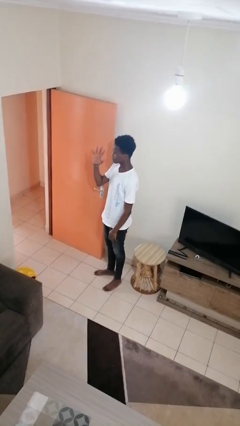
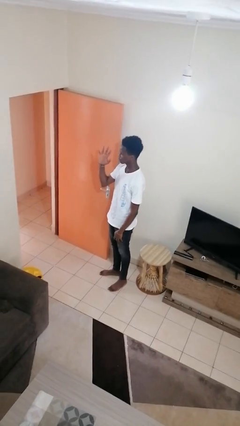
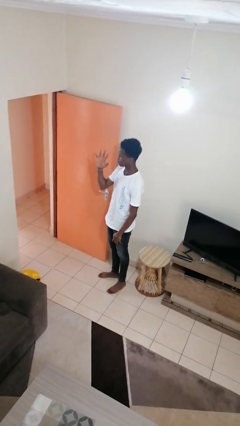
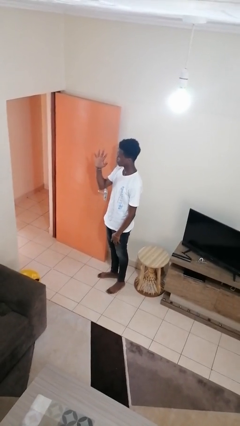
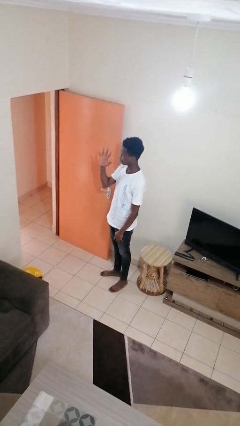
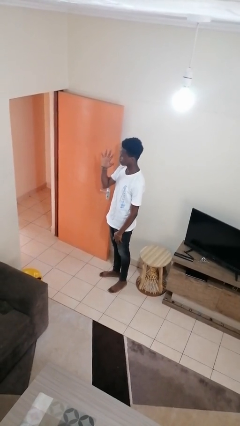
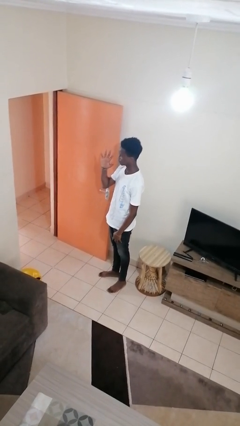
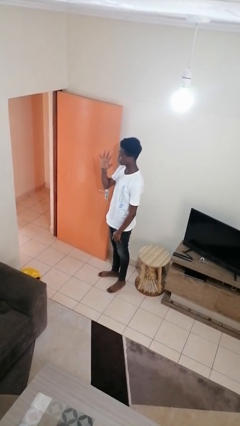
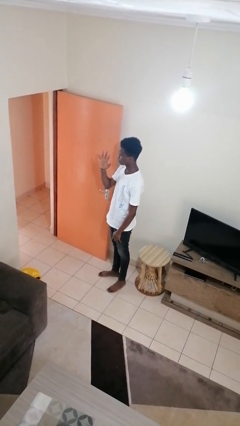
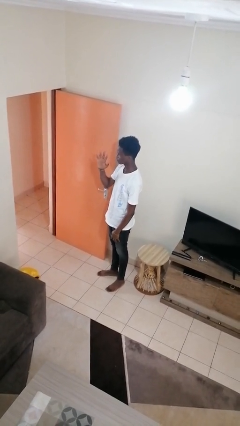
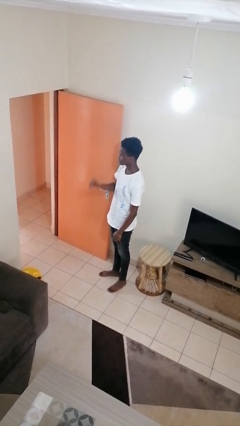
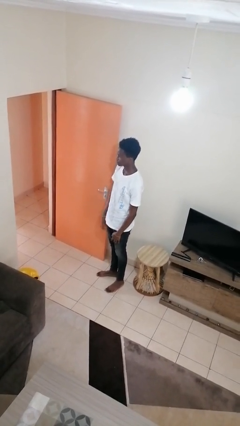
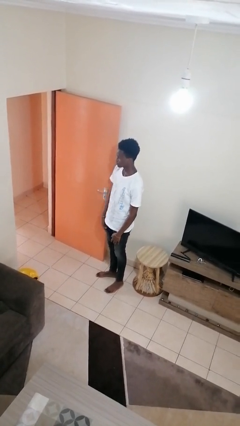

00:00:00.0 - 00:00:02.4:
person gestures number five

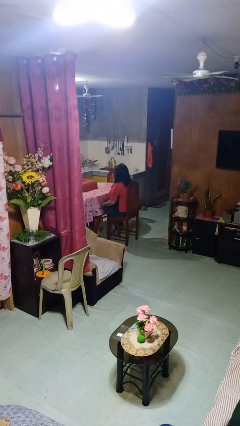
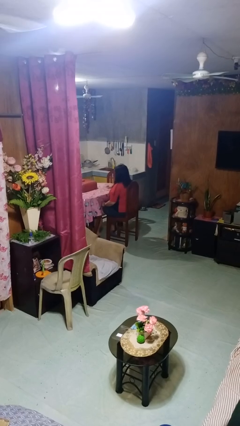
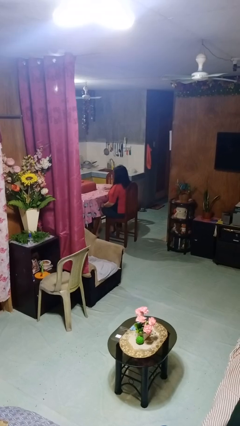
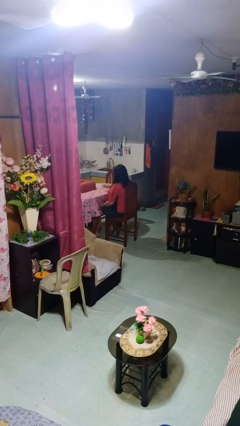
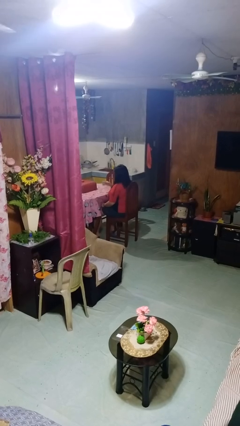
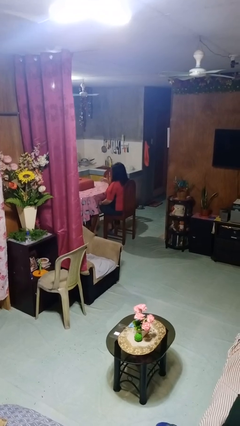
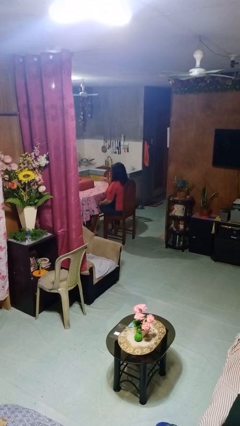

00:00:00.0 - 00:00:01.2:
person picks up object from table

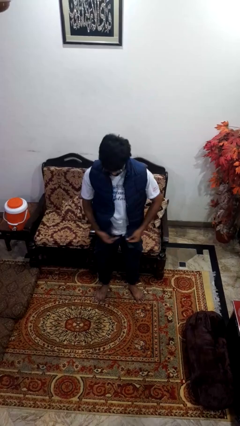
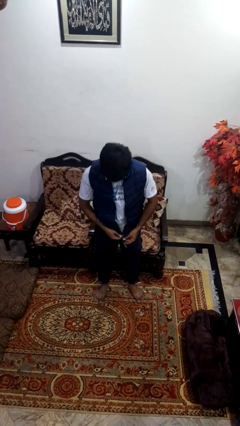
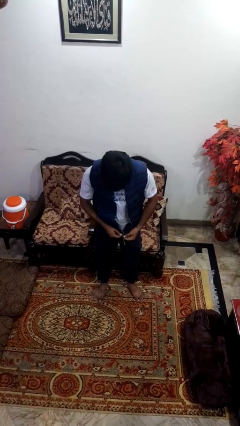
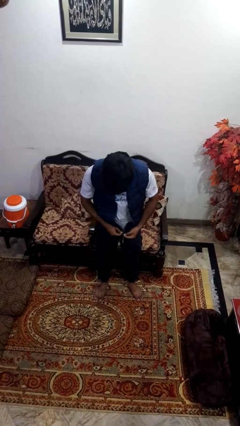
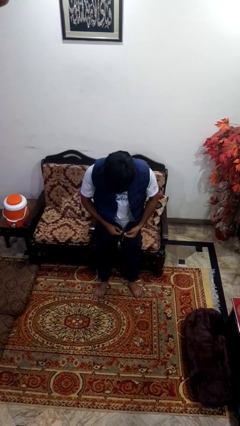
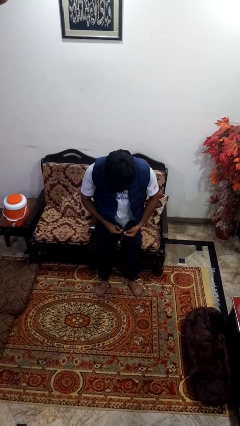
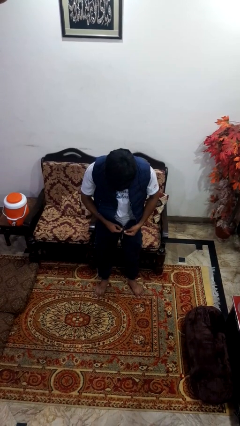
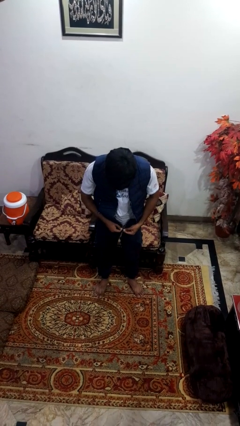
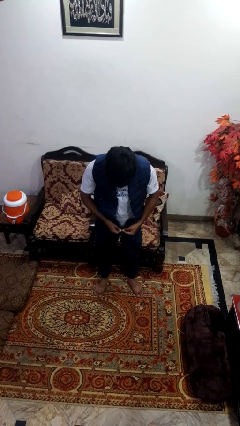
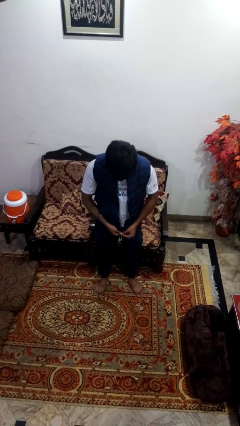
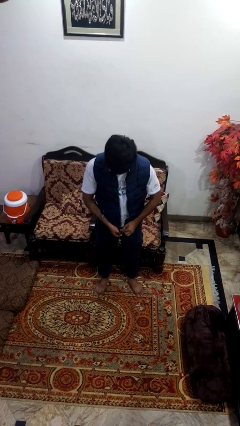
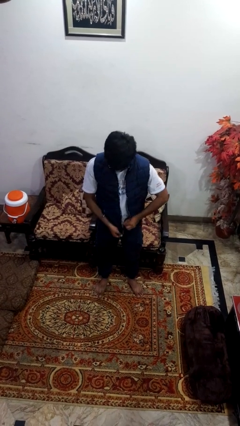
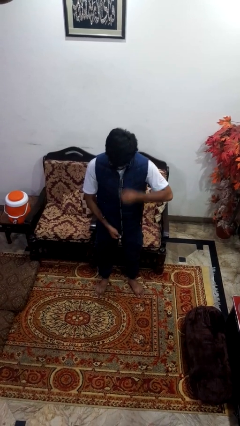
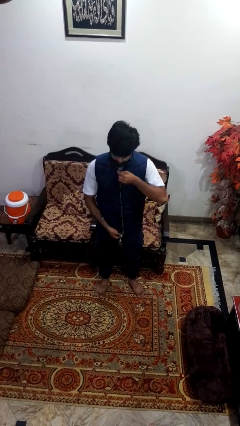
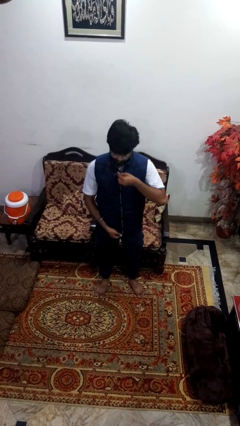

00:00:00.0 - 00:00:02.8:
person zips up jacket

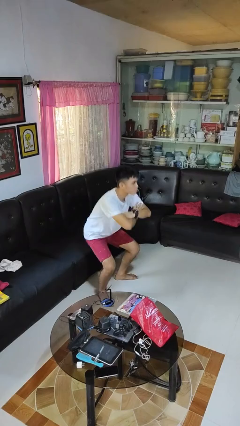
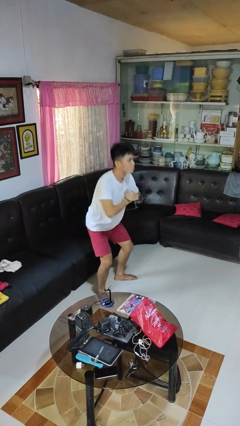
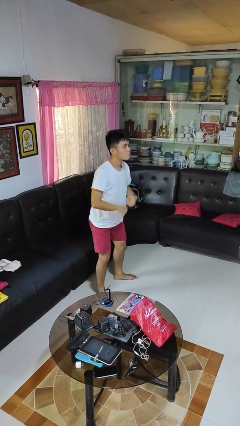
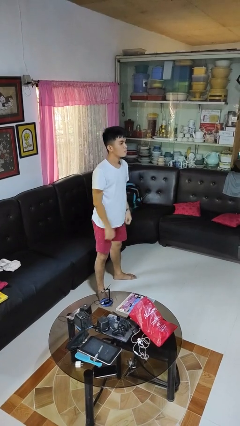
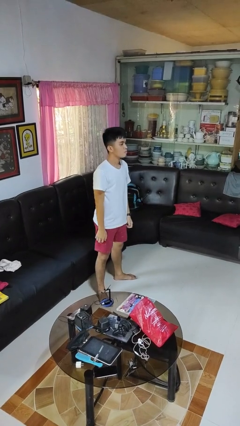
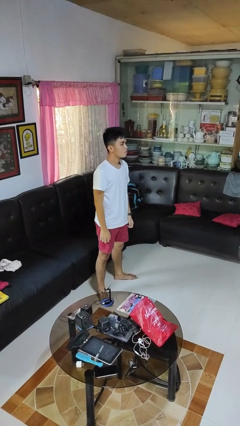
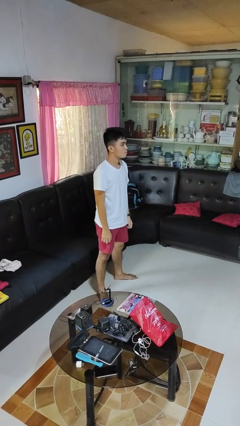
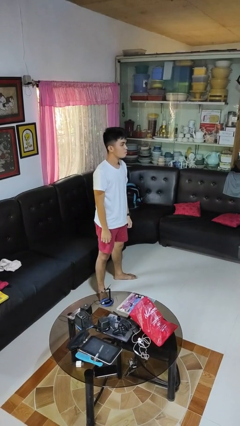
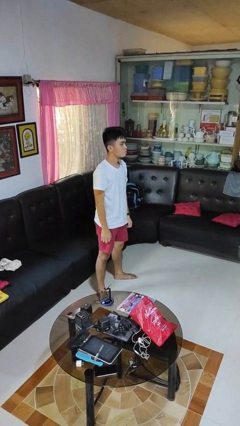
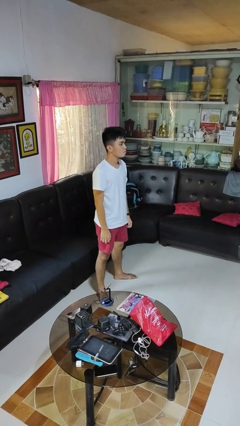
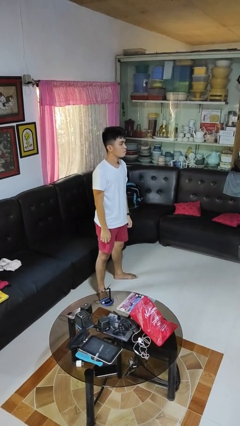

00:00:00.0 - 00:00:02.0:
person stands up

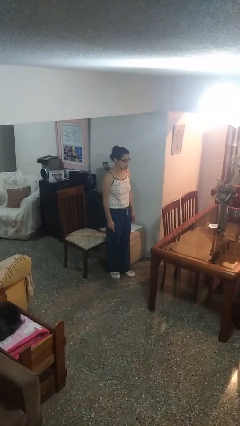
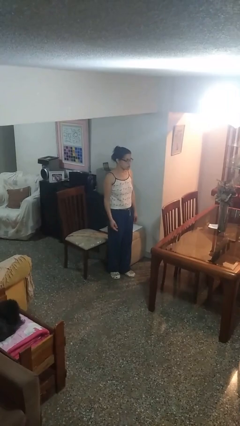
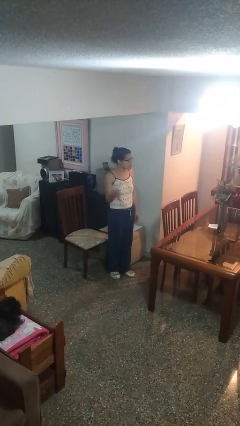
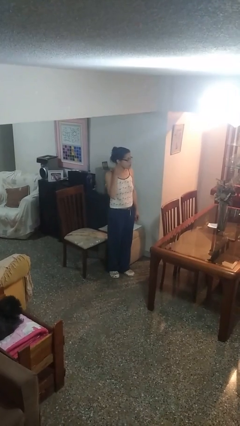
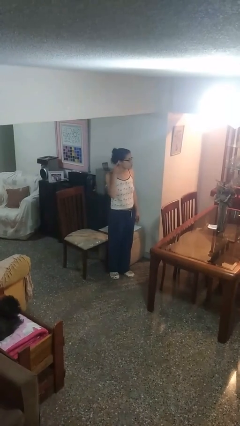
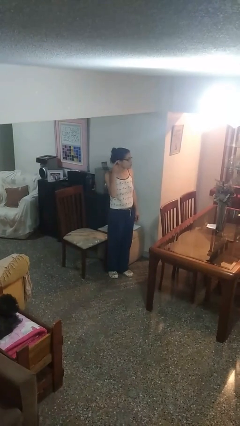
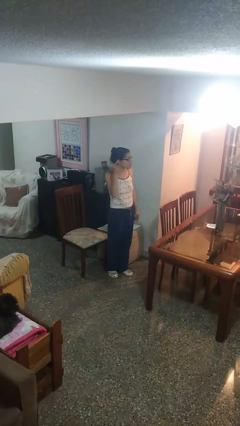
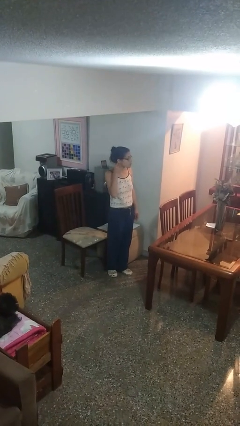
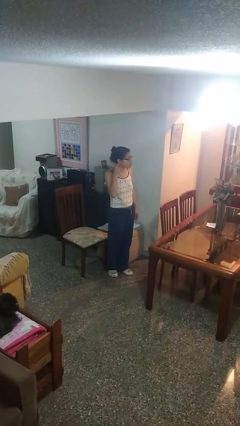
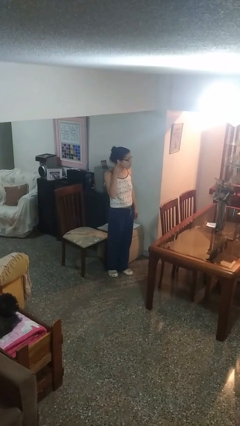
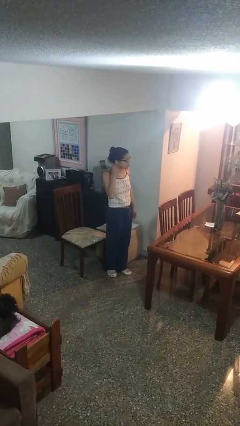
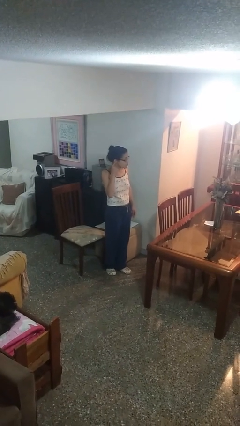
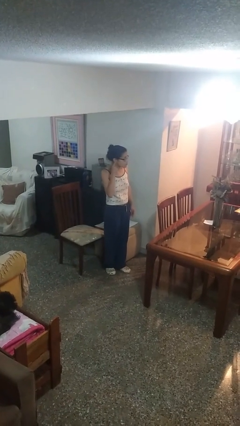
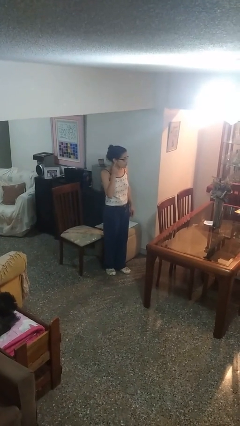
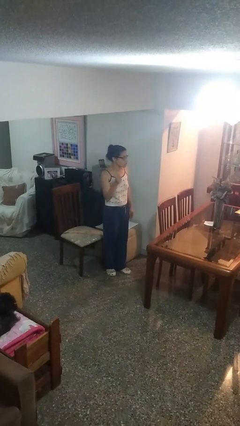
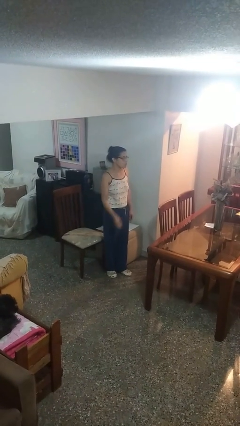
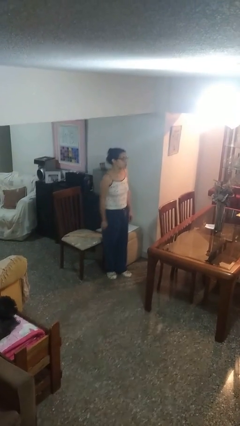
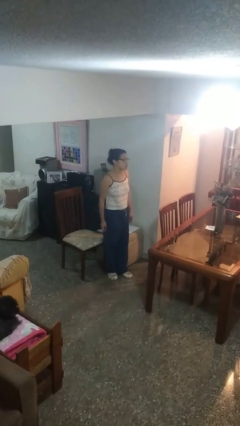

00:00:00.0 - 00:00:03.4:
person gestures listen closely

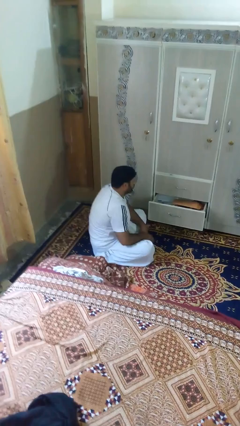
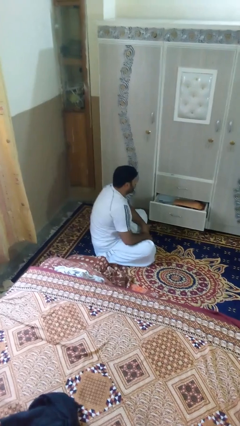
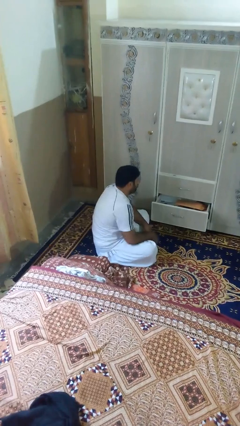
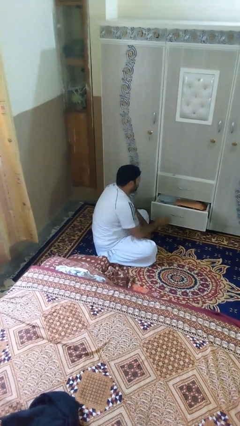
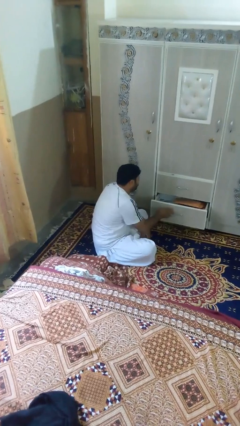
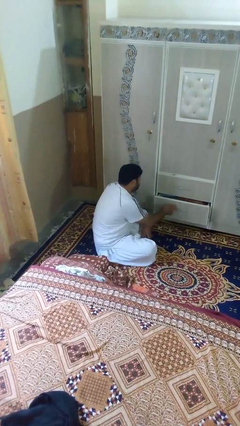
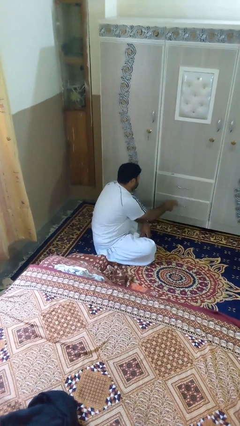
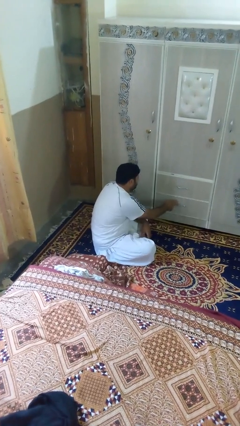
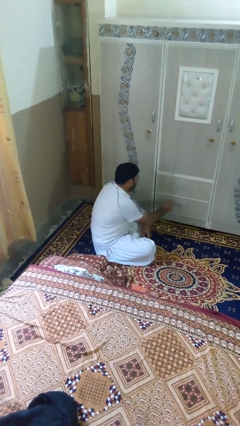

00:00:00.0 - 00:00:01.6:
person closes dresser drawer

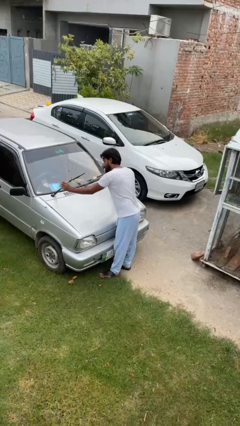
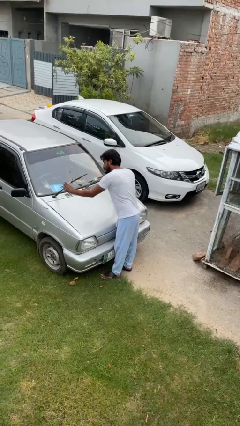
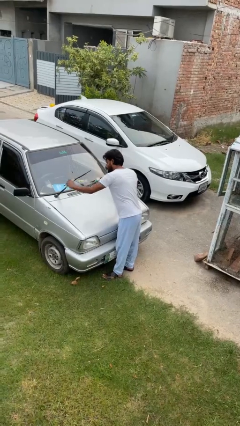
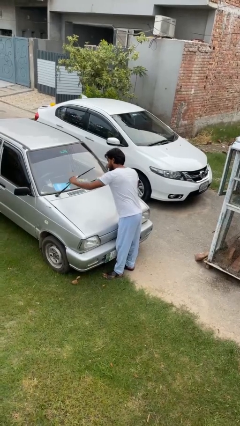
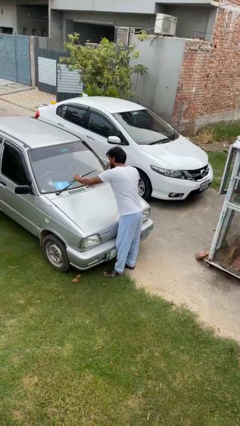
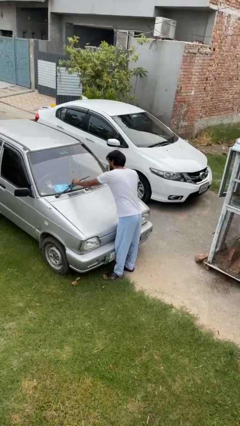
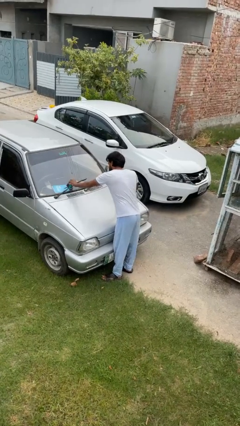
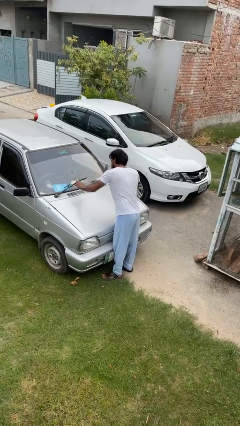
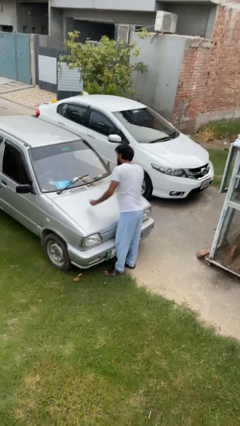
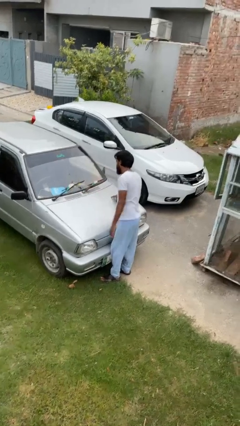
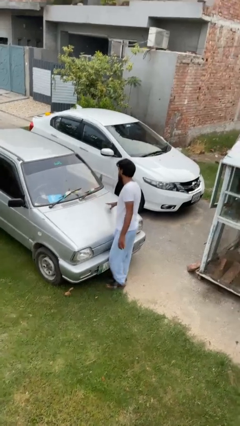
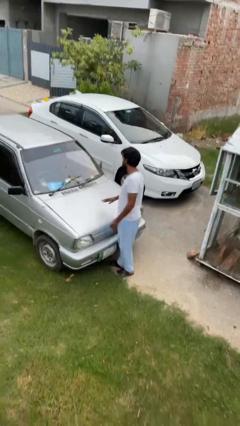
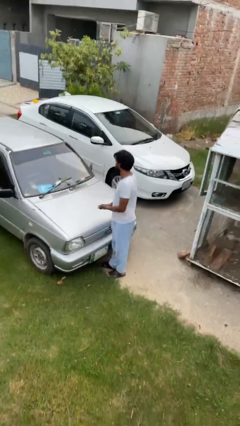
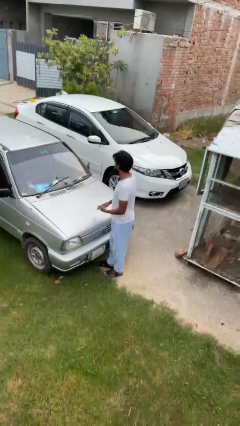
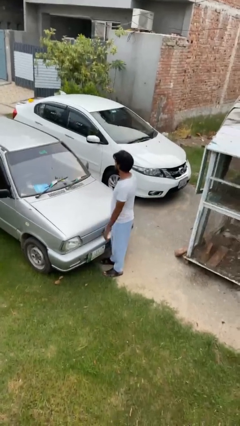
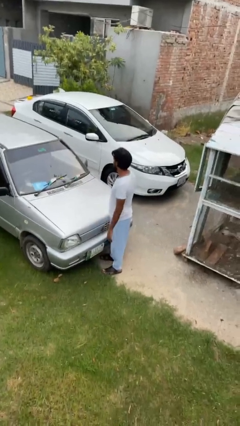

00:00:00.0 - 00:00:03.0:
person flips down car wipers

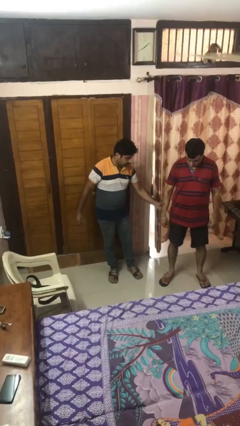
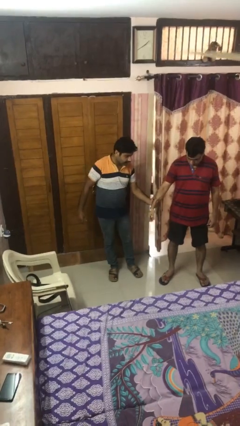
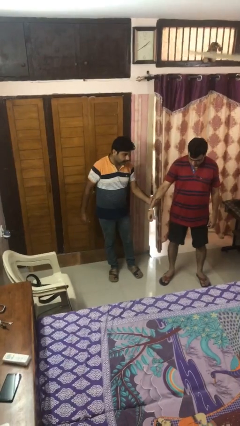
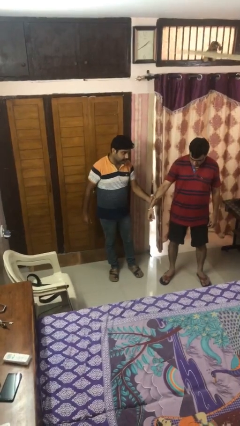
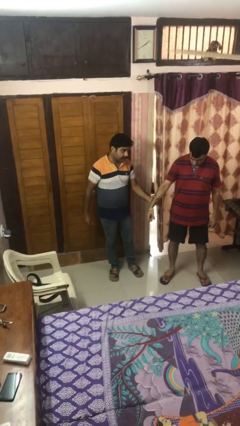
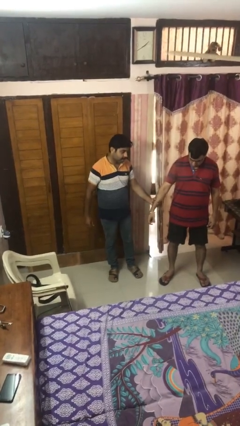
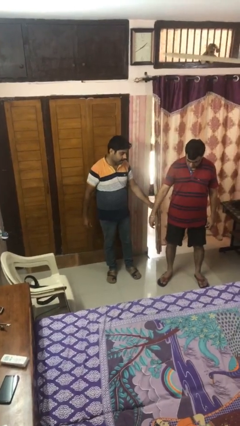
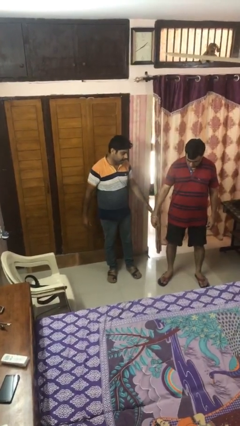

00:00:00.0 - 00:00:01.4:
person grabs person by forearm
